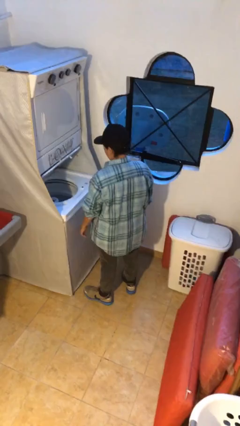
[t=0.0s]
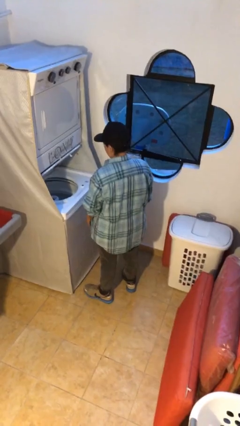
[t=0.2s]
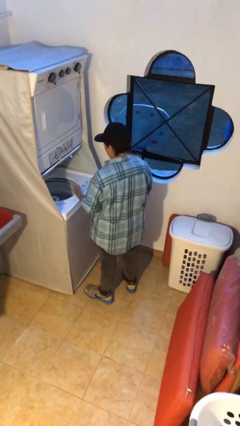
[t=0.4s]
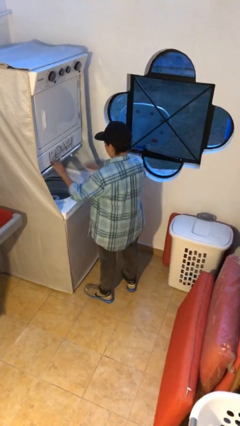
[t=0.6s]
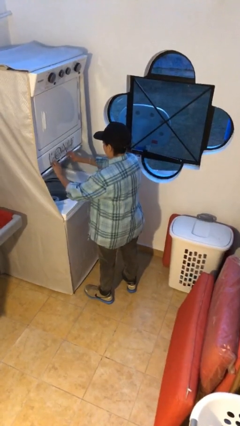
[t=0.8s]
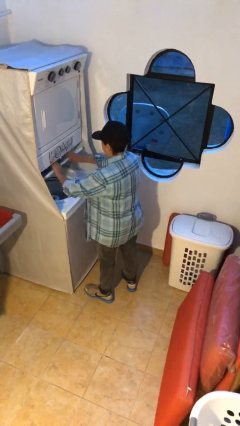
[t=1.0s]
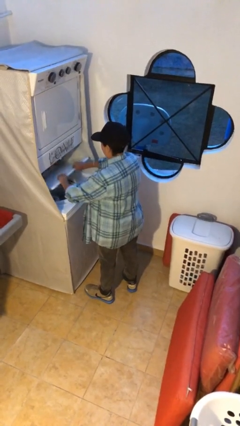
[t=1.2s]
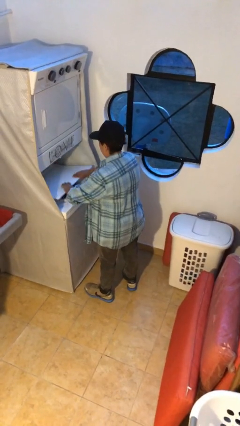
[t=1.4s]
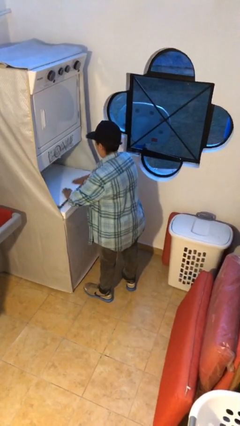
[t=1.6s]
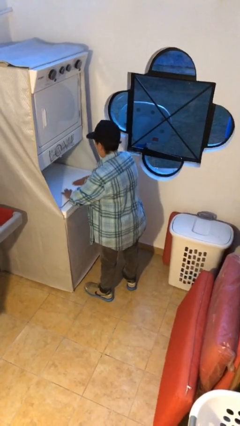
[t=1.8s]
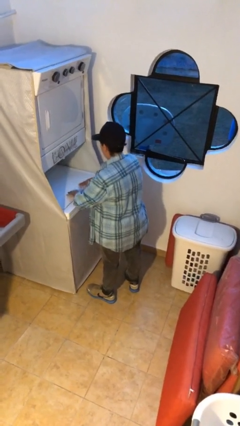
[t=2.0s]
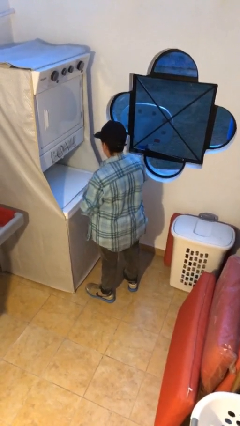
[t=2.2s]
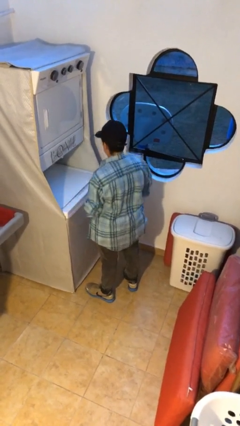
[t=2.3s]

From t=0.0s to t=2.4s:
person closes clothes washer

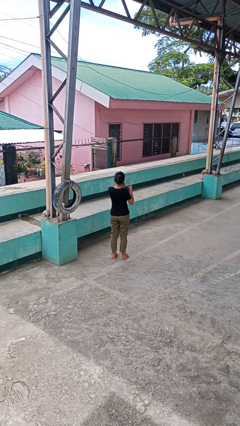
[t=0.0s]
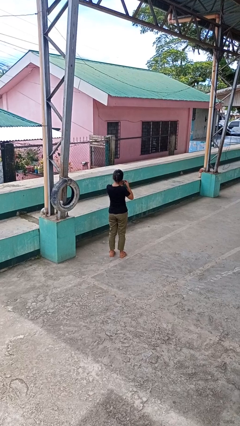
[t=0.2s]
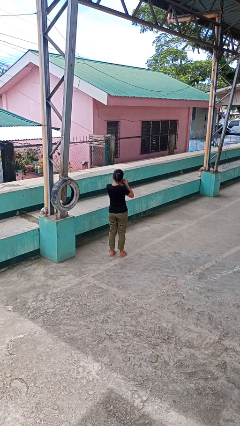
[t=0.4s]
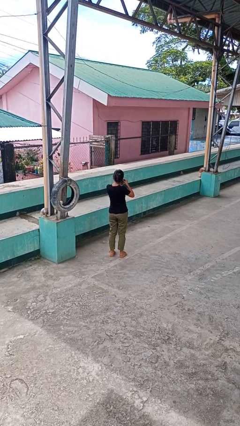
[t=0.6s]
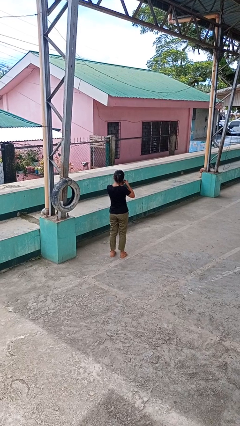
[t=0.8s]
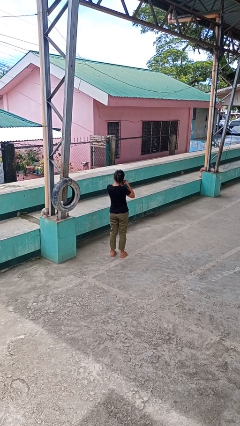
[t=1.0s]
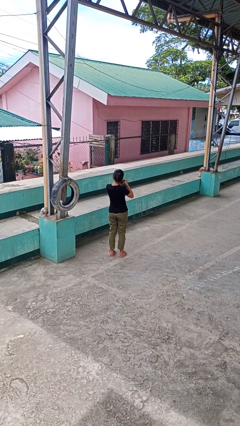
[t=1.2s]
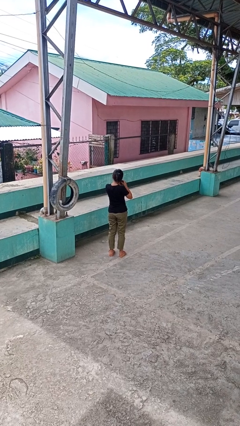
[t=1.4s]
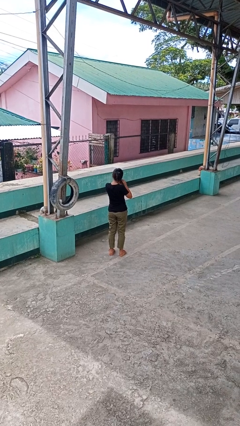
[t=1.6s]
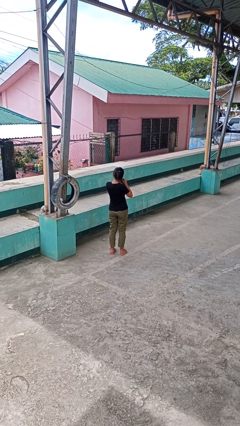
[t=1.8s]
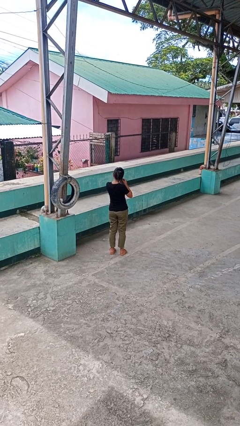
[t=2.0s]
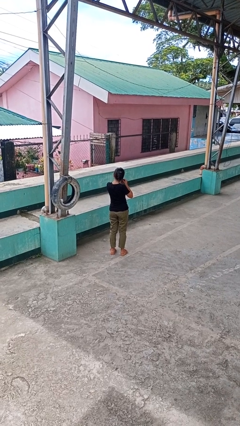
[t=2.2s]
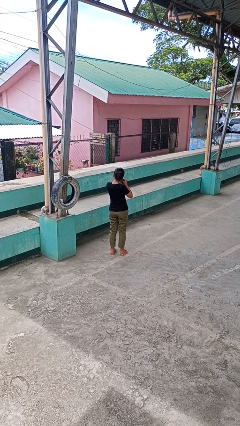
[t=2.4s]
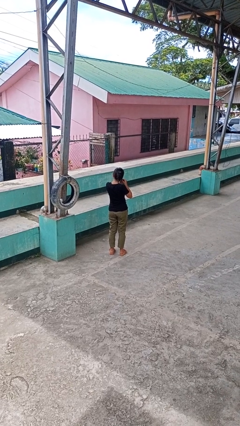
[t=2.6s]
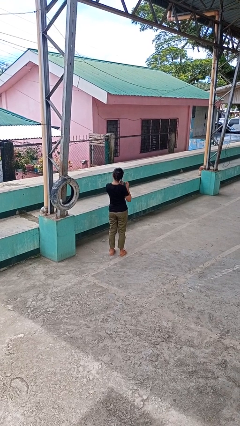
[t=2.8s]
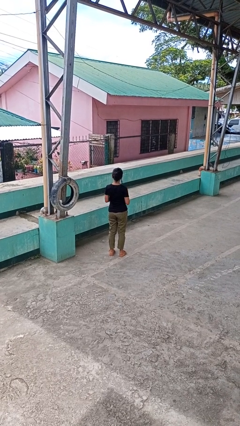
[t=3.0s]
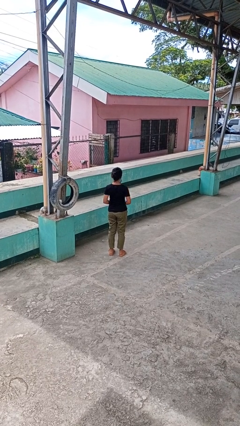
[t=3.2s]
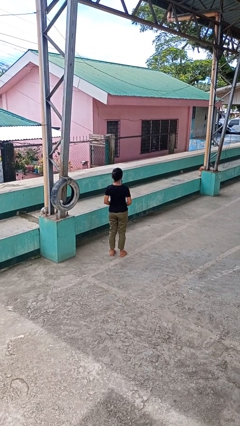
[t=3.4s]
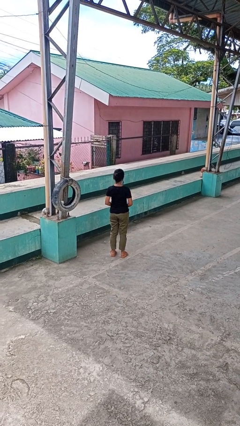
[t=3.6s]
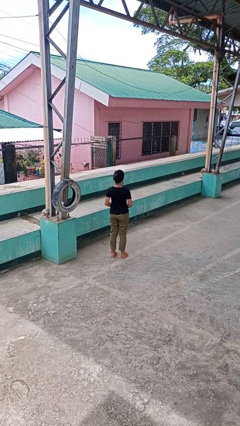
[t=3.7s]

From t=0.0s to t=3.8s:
person puts on earrings

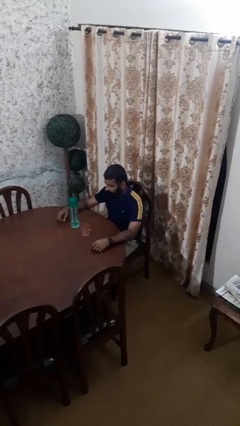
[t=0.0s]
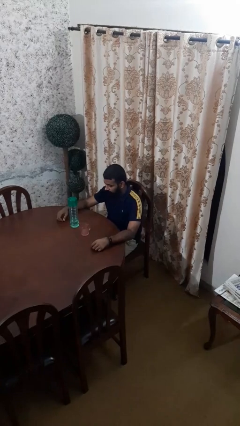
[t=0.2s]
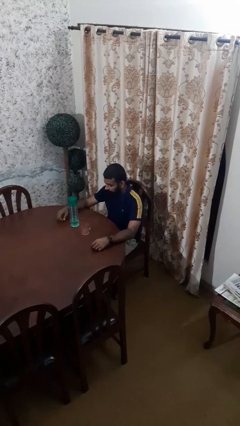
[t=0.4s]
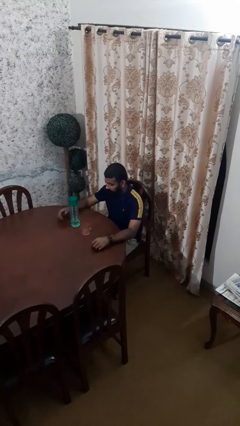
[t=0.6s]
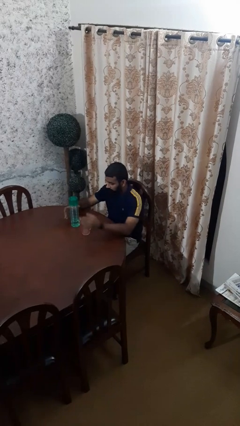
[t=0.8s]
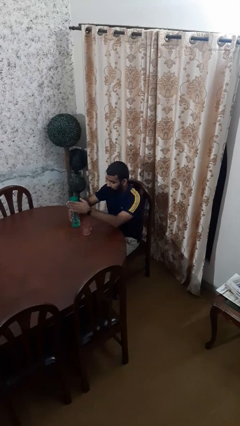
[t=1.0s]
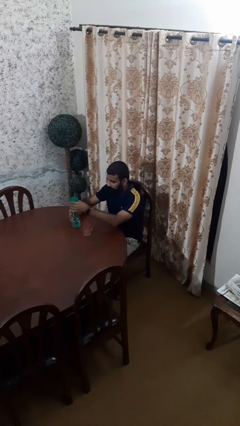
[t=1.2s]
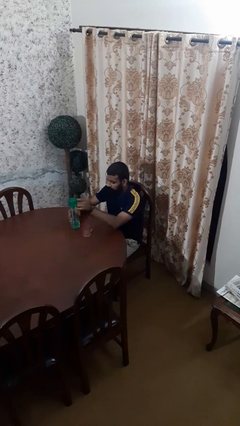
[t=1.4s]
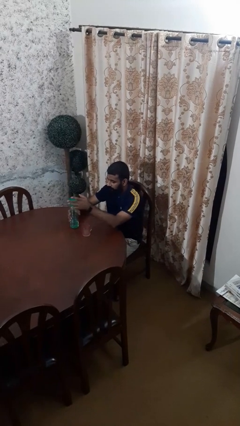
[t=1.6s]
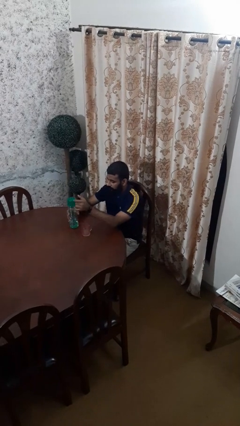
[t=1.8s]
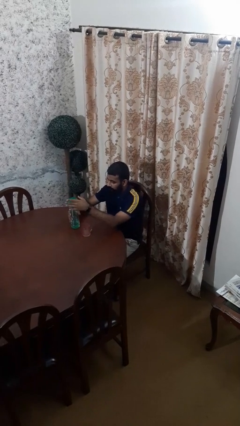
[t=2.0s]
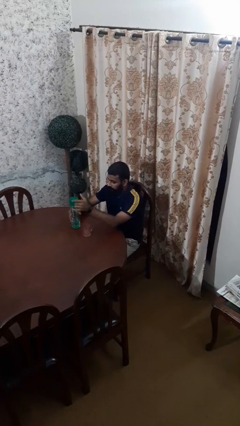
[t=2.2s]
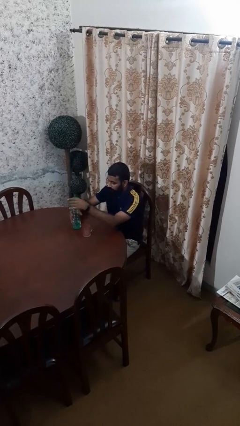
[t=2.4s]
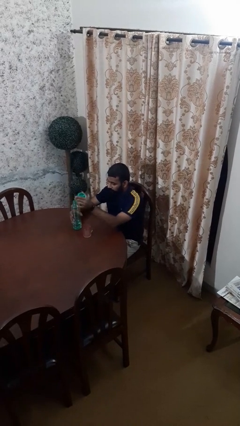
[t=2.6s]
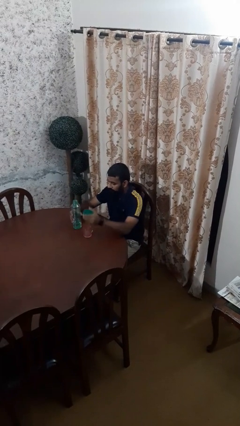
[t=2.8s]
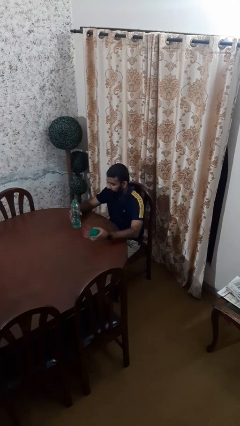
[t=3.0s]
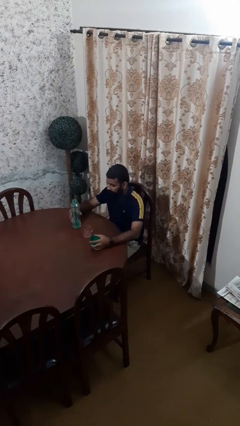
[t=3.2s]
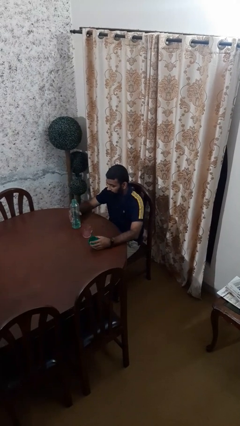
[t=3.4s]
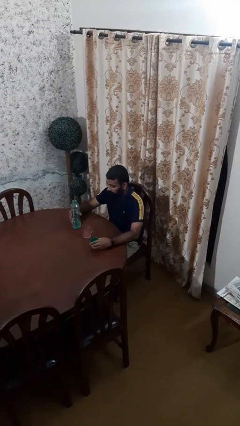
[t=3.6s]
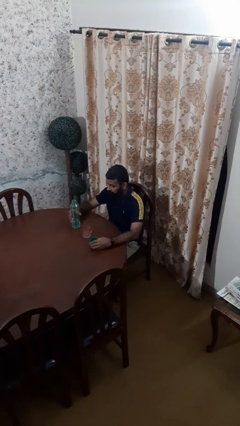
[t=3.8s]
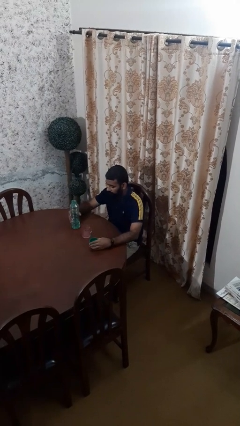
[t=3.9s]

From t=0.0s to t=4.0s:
person unscrews lid from bottle

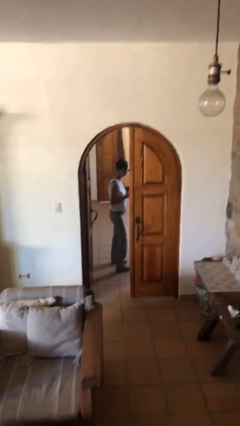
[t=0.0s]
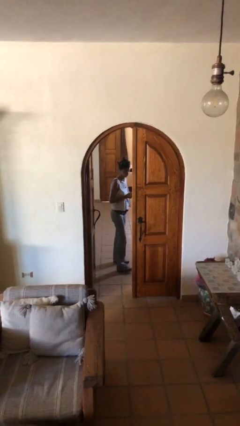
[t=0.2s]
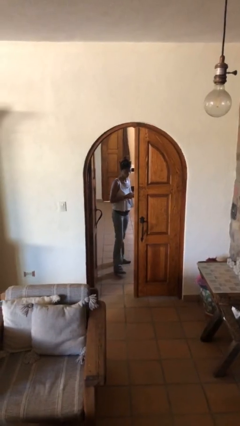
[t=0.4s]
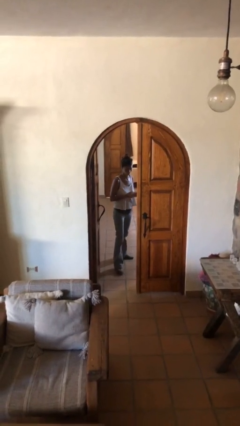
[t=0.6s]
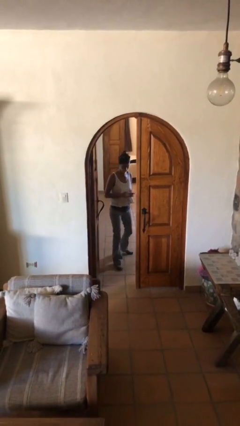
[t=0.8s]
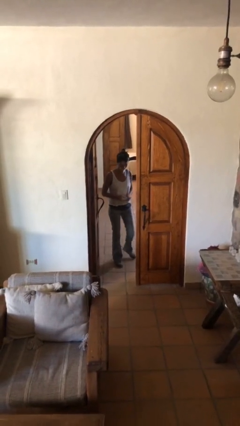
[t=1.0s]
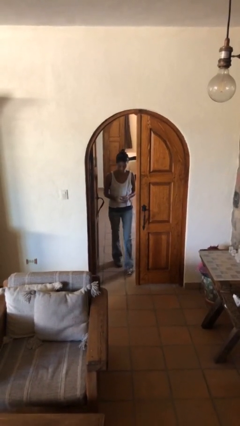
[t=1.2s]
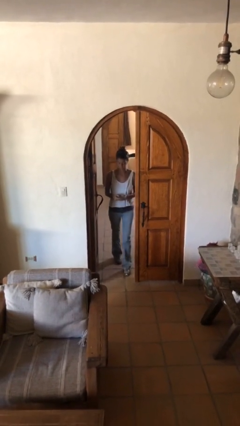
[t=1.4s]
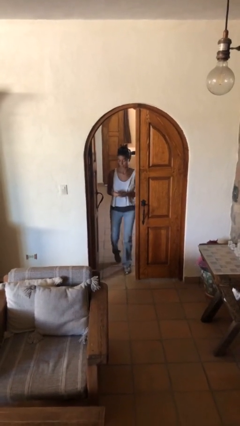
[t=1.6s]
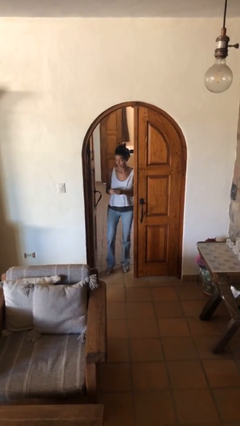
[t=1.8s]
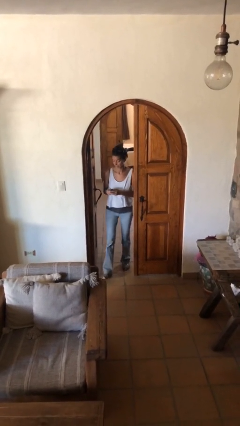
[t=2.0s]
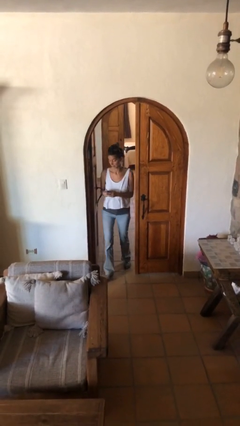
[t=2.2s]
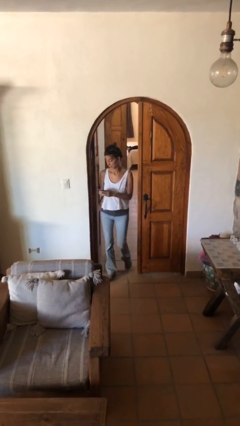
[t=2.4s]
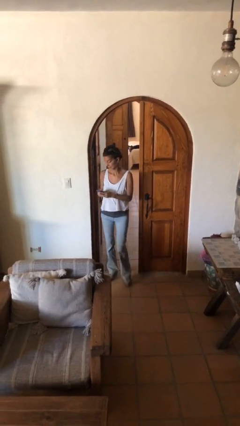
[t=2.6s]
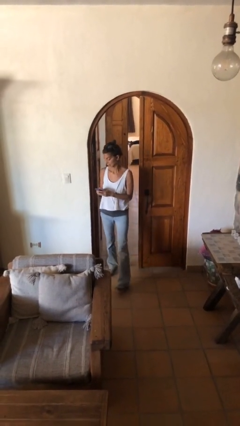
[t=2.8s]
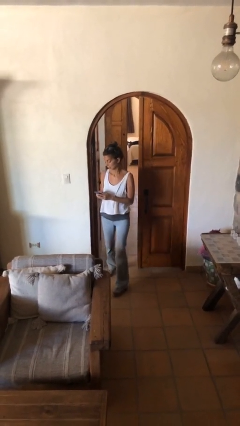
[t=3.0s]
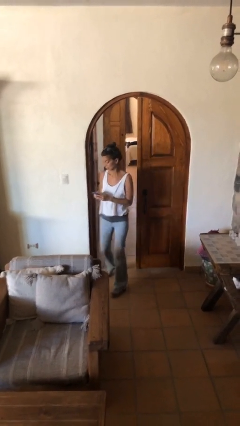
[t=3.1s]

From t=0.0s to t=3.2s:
person enters scene through structure

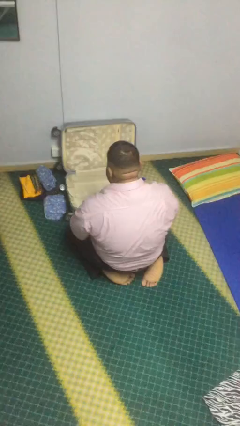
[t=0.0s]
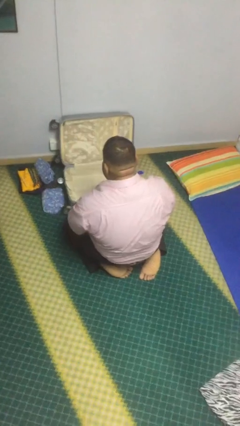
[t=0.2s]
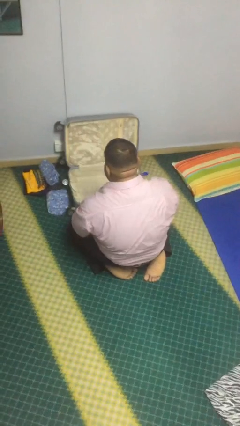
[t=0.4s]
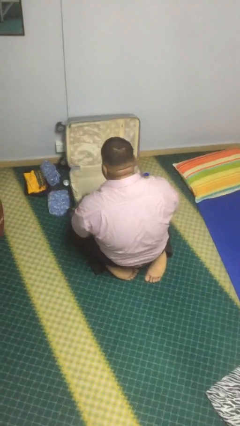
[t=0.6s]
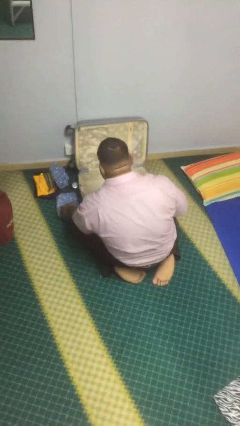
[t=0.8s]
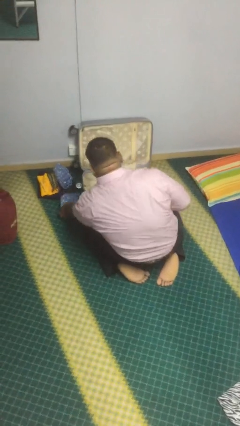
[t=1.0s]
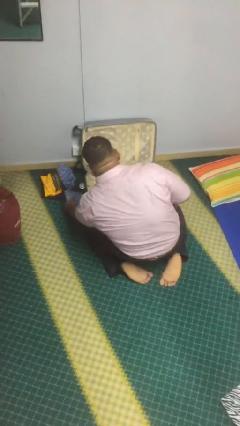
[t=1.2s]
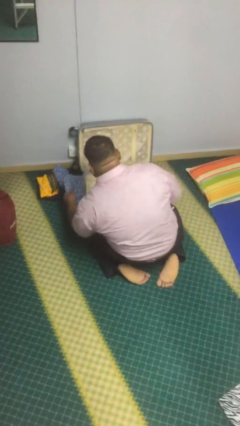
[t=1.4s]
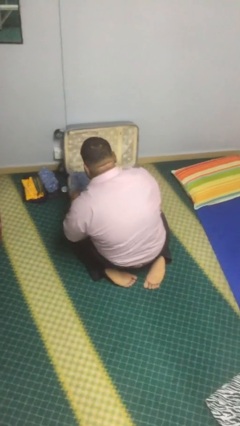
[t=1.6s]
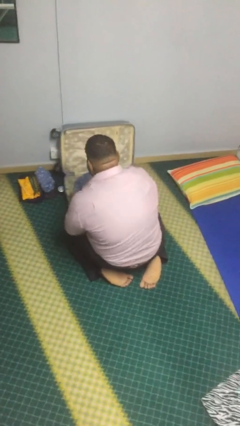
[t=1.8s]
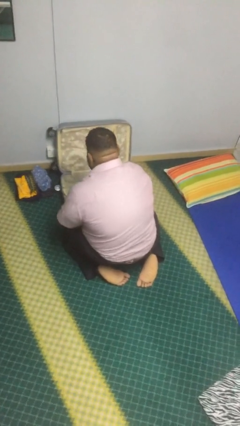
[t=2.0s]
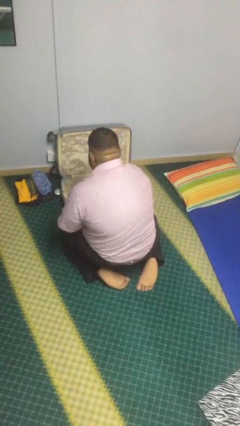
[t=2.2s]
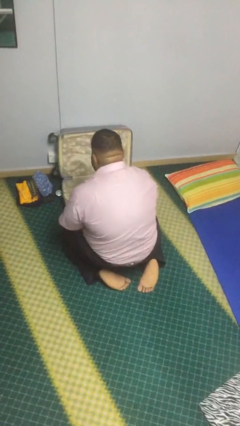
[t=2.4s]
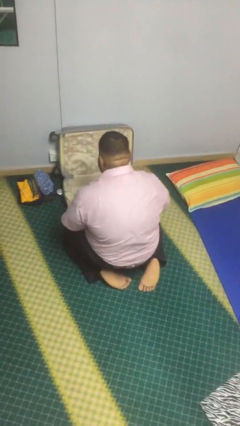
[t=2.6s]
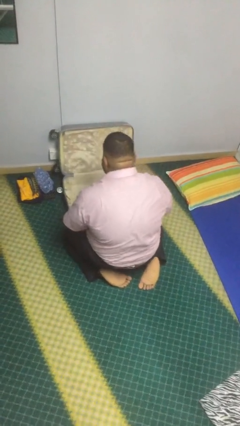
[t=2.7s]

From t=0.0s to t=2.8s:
person loads clothes into suitcase

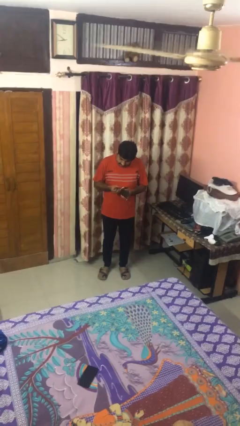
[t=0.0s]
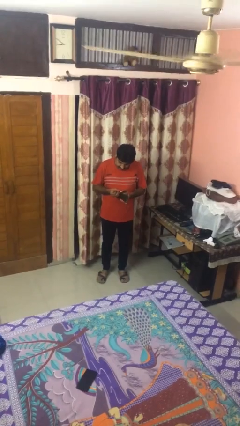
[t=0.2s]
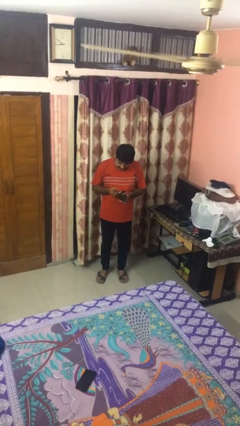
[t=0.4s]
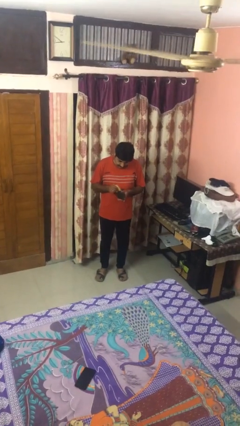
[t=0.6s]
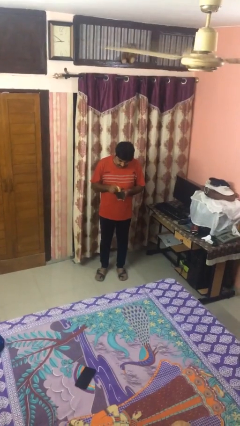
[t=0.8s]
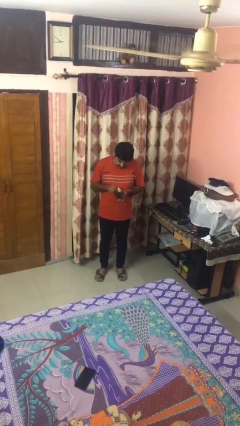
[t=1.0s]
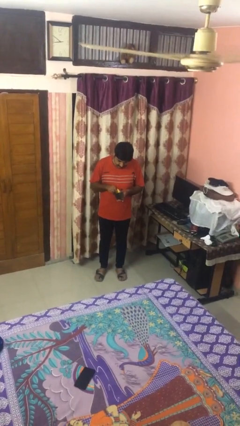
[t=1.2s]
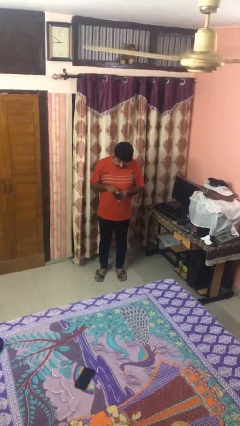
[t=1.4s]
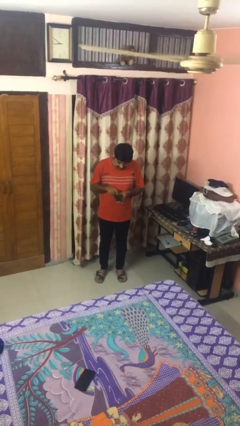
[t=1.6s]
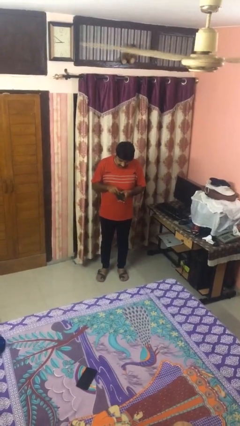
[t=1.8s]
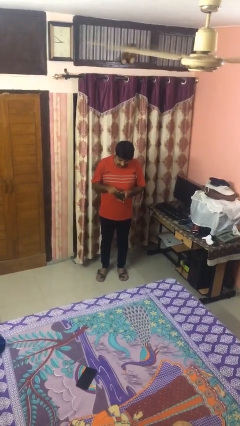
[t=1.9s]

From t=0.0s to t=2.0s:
person puts object into purse
